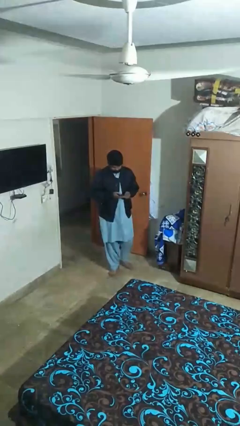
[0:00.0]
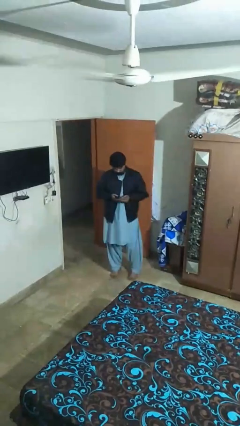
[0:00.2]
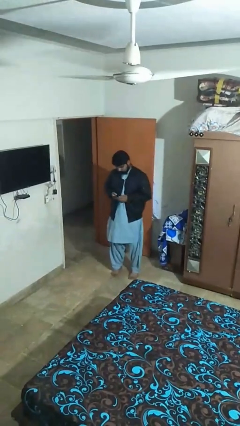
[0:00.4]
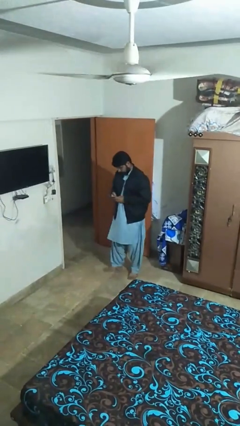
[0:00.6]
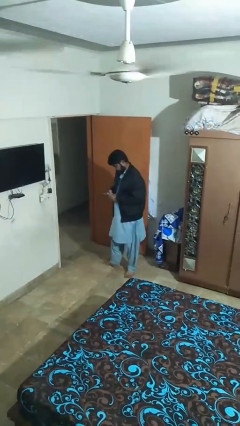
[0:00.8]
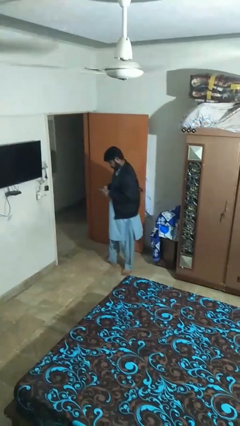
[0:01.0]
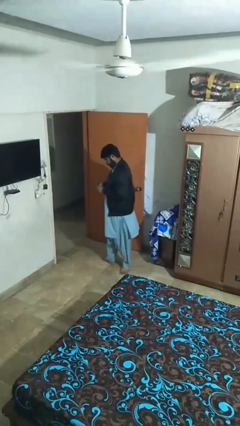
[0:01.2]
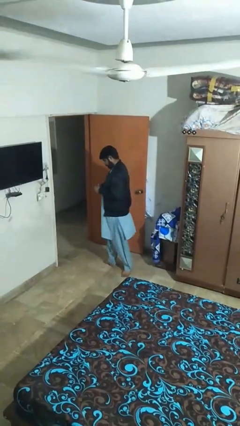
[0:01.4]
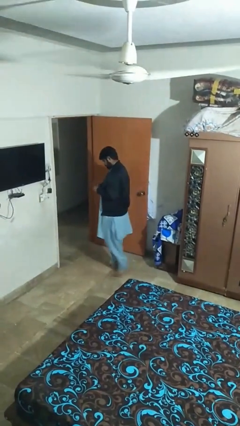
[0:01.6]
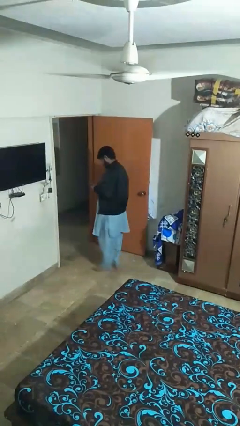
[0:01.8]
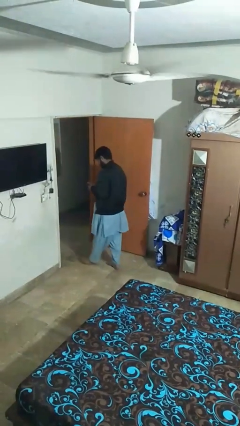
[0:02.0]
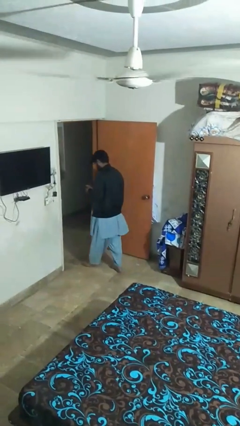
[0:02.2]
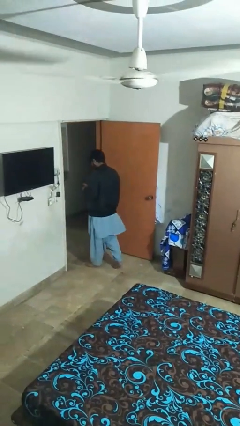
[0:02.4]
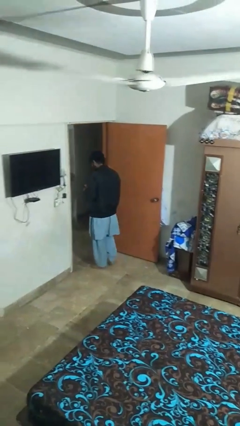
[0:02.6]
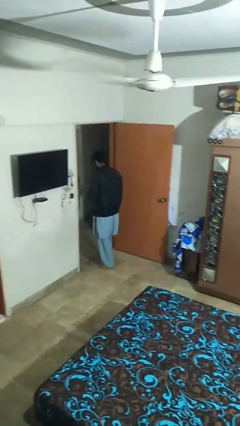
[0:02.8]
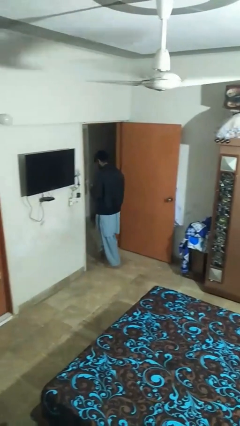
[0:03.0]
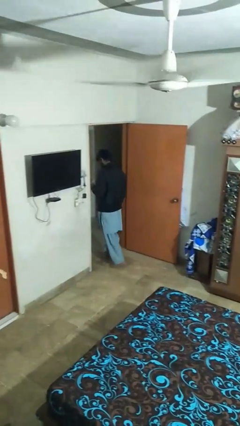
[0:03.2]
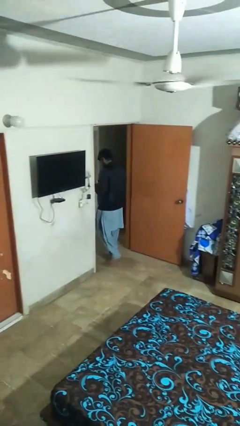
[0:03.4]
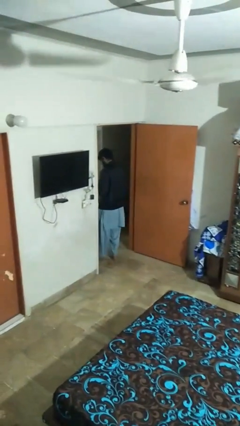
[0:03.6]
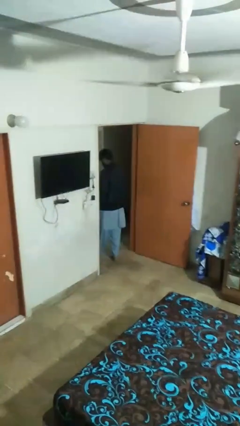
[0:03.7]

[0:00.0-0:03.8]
person exits scene through structure

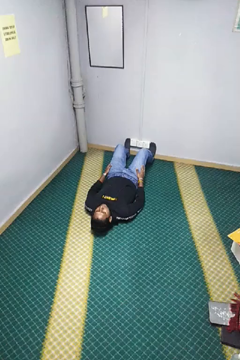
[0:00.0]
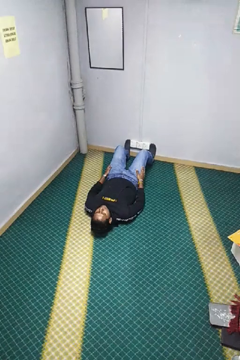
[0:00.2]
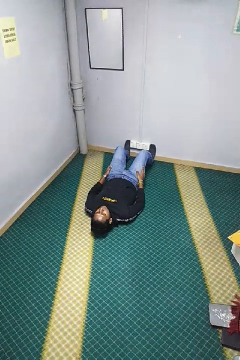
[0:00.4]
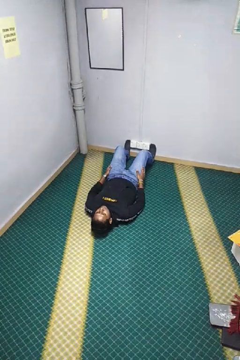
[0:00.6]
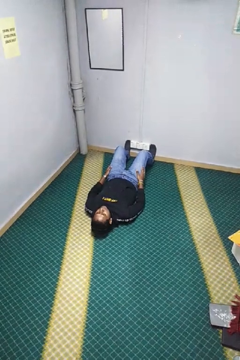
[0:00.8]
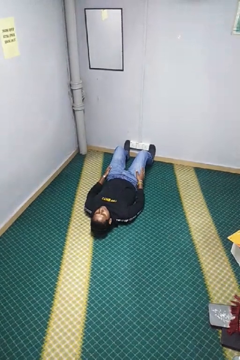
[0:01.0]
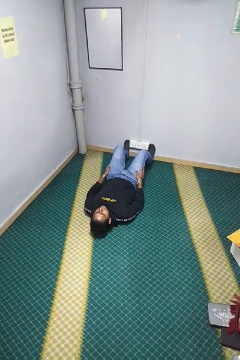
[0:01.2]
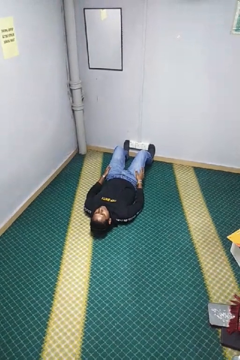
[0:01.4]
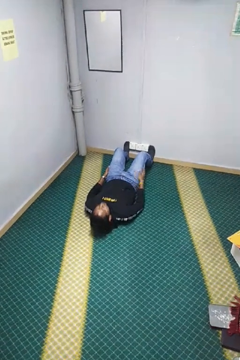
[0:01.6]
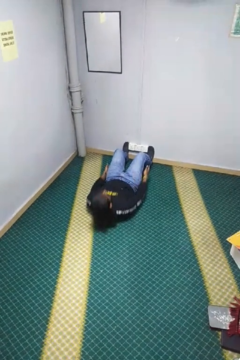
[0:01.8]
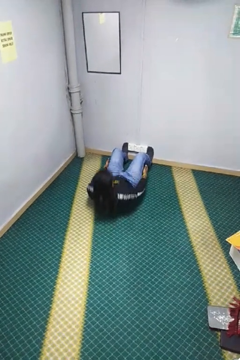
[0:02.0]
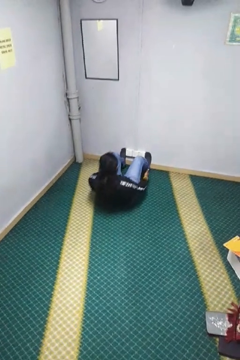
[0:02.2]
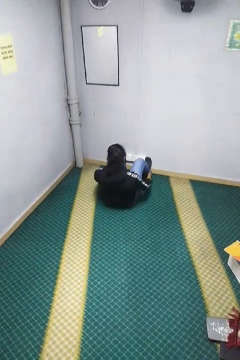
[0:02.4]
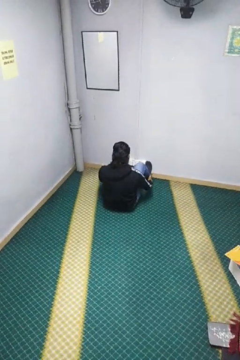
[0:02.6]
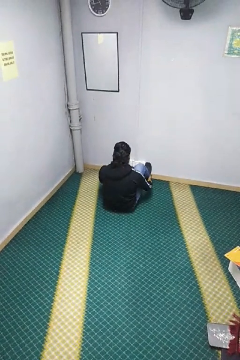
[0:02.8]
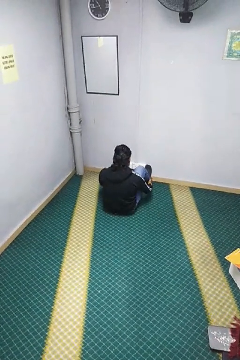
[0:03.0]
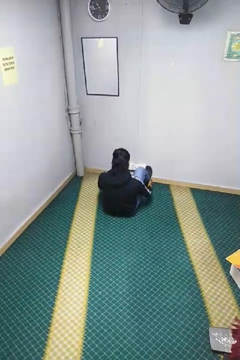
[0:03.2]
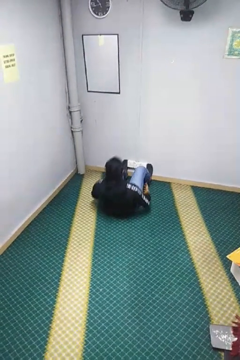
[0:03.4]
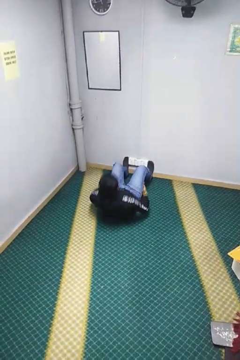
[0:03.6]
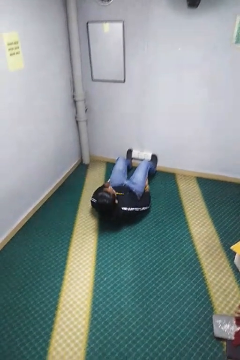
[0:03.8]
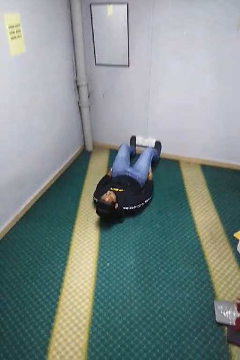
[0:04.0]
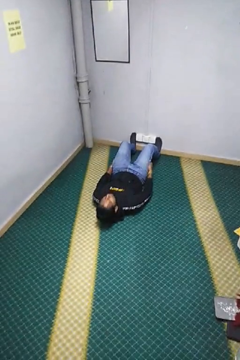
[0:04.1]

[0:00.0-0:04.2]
person exercises with situp

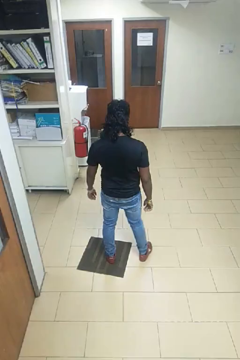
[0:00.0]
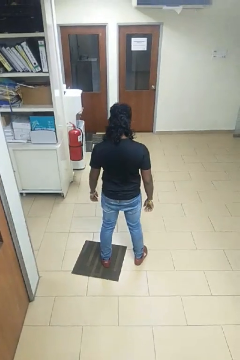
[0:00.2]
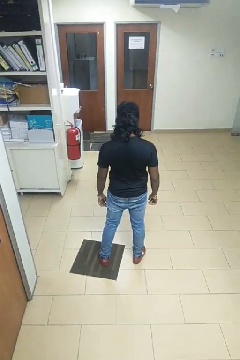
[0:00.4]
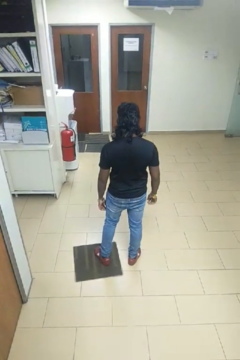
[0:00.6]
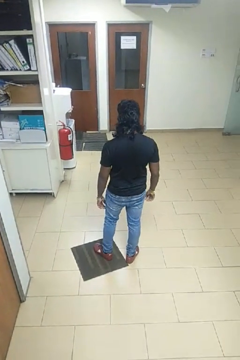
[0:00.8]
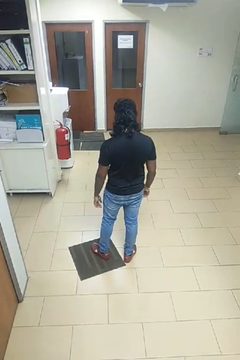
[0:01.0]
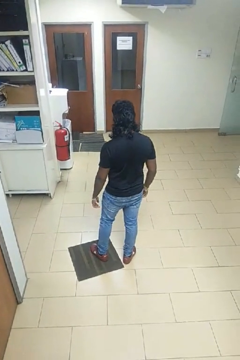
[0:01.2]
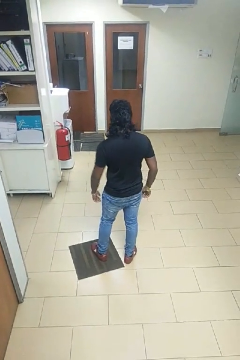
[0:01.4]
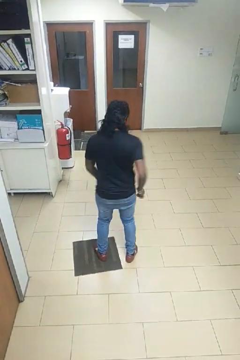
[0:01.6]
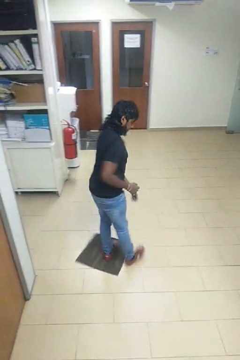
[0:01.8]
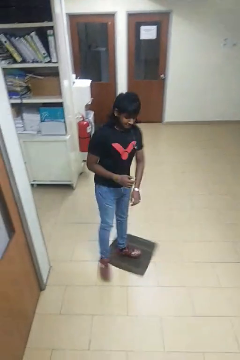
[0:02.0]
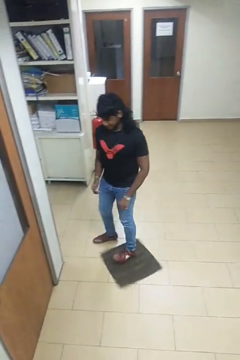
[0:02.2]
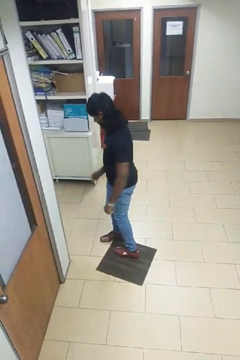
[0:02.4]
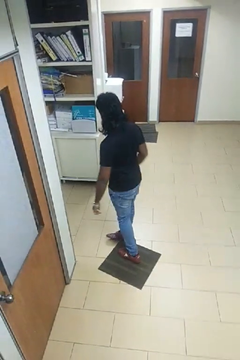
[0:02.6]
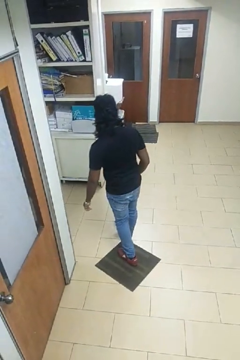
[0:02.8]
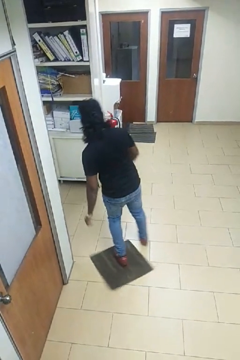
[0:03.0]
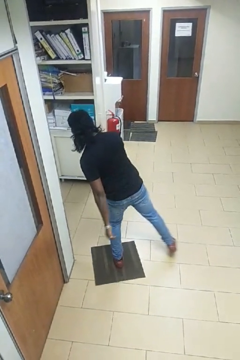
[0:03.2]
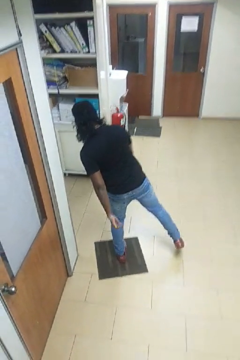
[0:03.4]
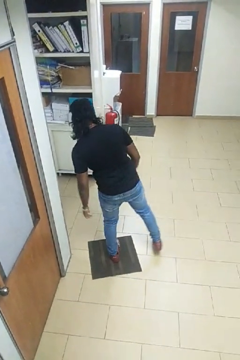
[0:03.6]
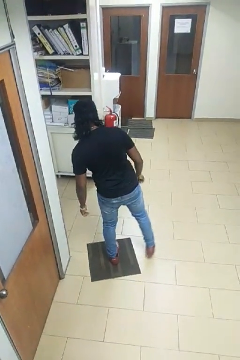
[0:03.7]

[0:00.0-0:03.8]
person twirls

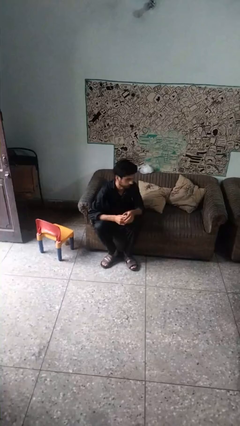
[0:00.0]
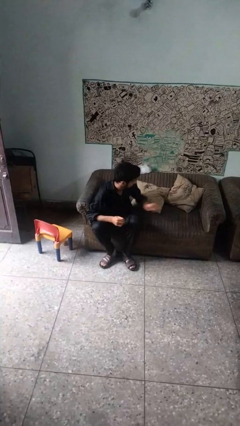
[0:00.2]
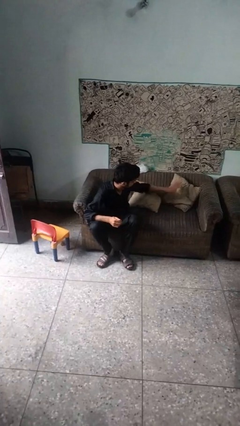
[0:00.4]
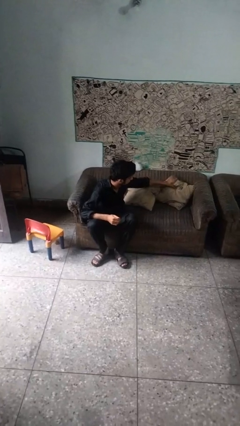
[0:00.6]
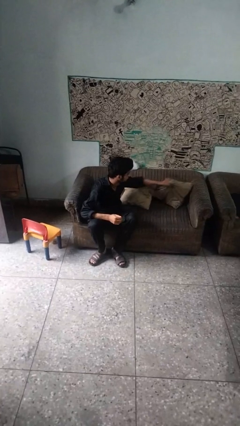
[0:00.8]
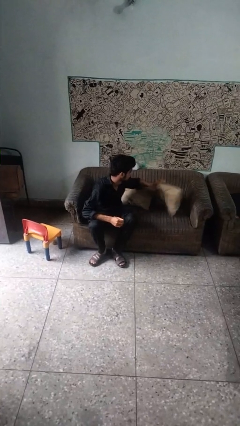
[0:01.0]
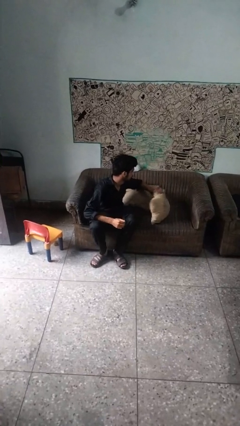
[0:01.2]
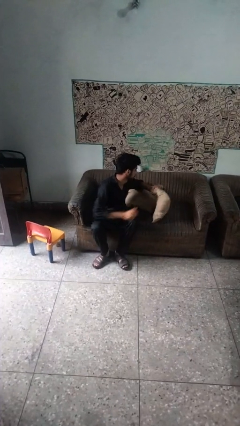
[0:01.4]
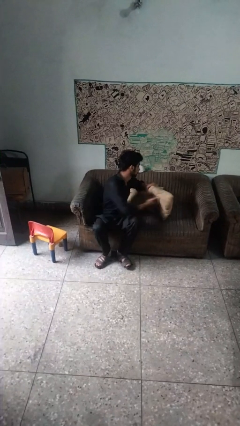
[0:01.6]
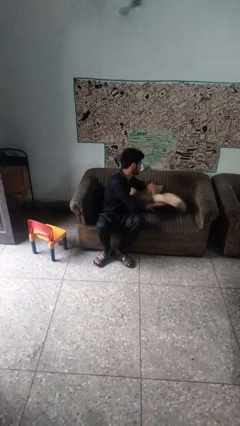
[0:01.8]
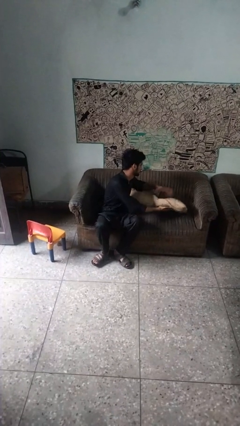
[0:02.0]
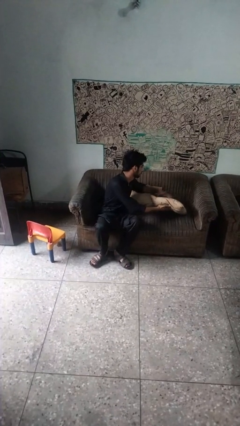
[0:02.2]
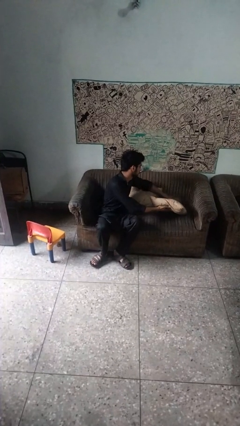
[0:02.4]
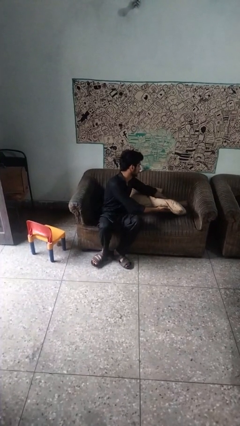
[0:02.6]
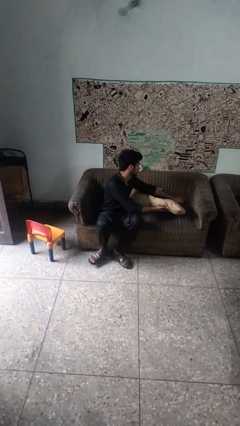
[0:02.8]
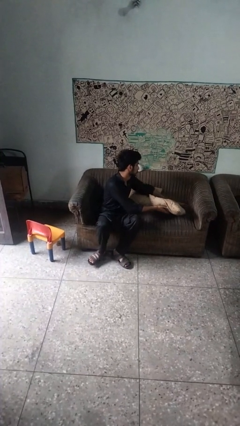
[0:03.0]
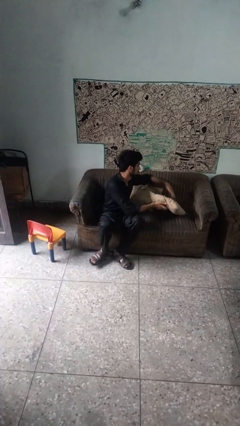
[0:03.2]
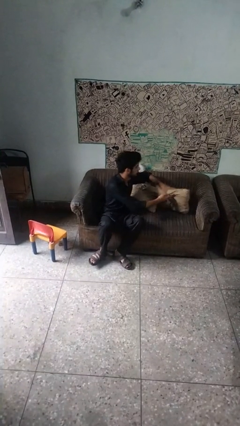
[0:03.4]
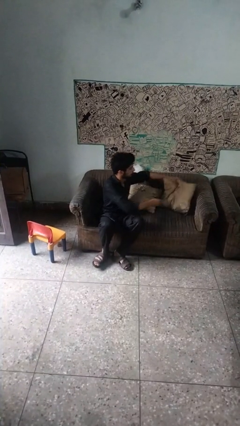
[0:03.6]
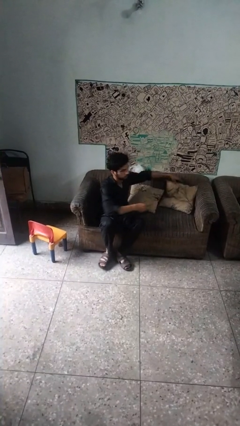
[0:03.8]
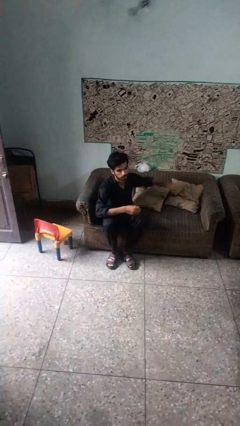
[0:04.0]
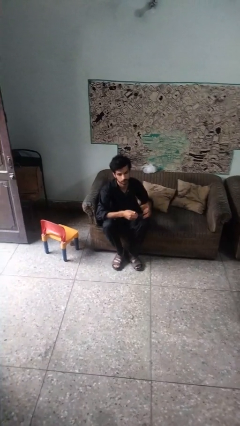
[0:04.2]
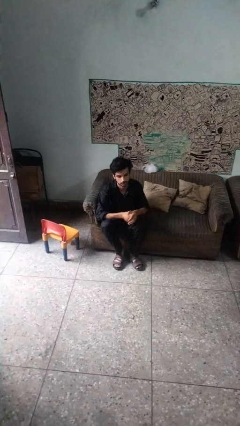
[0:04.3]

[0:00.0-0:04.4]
person searches in couch

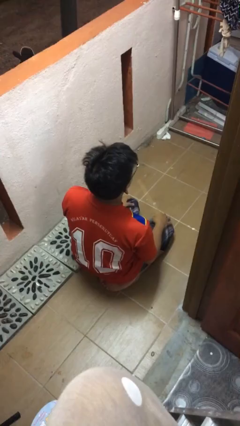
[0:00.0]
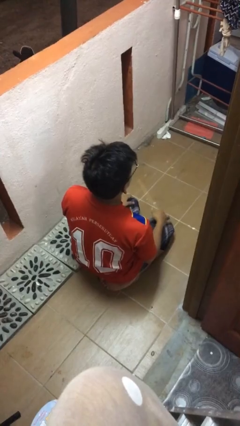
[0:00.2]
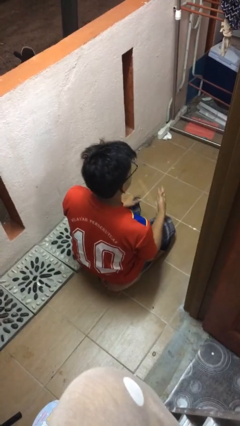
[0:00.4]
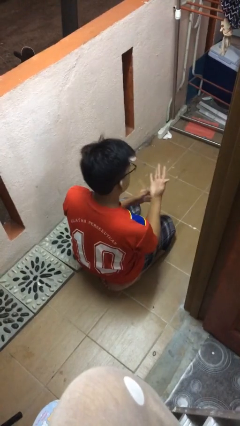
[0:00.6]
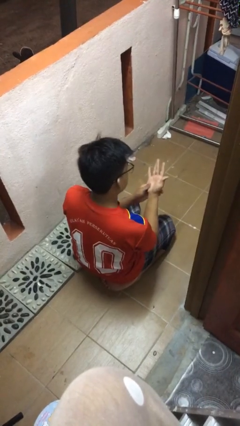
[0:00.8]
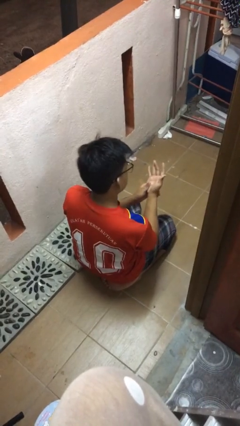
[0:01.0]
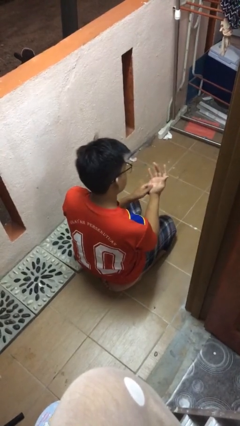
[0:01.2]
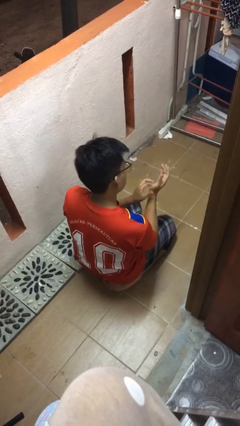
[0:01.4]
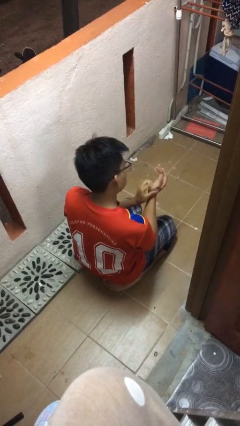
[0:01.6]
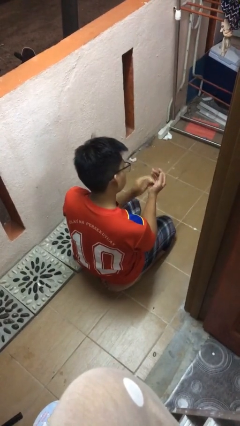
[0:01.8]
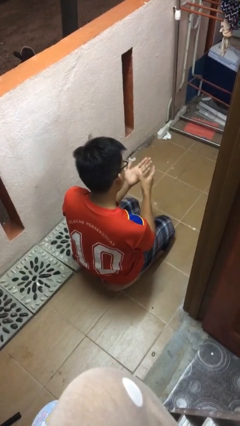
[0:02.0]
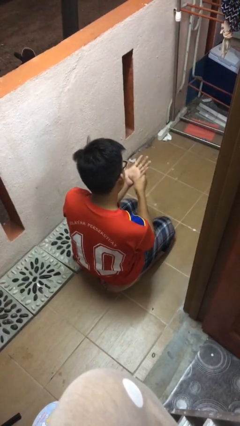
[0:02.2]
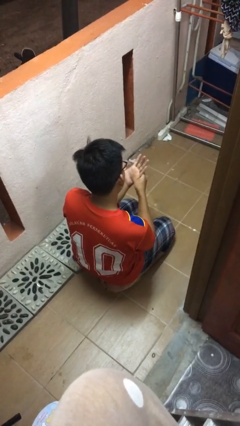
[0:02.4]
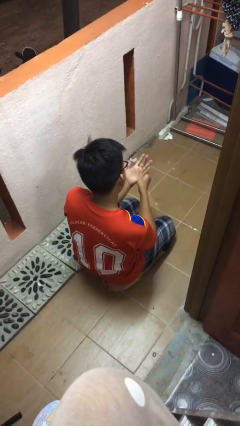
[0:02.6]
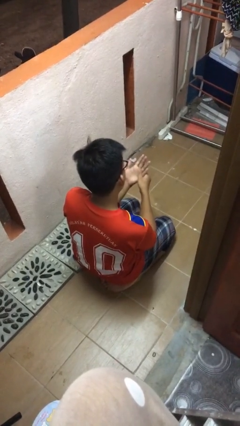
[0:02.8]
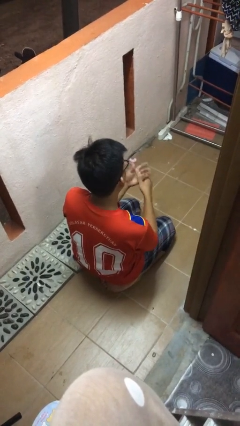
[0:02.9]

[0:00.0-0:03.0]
person looks at hands in lap
